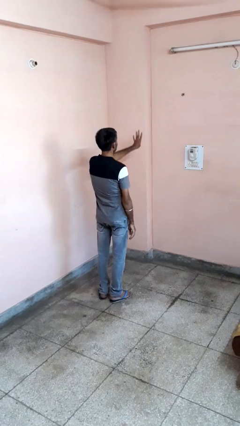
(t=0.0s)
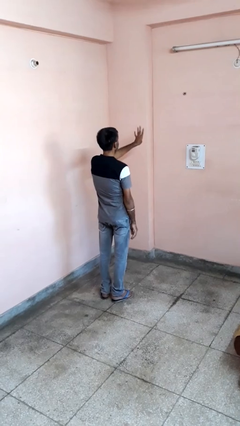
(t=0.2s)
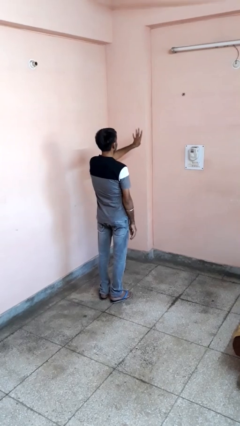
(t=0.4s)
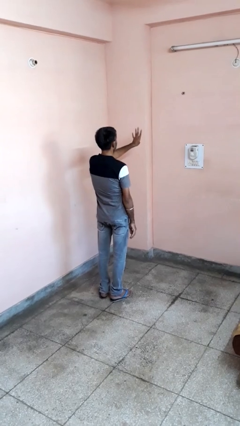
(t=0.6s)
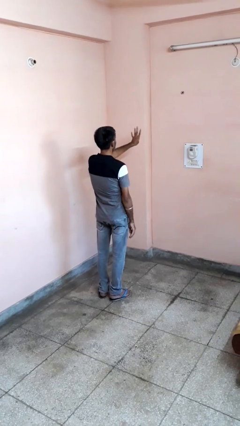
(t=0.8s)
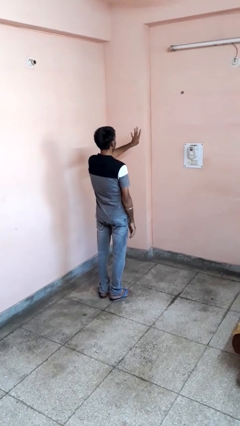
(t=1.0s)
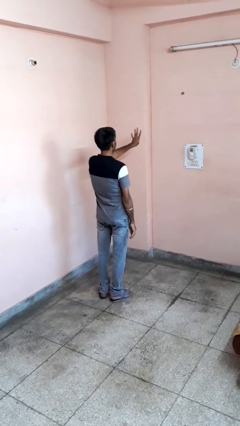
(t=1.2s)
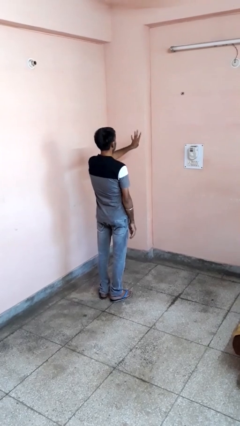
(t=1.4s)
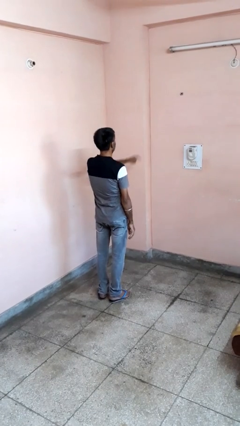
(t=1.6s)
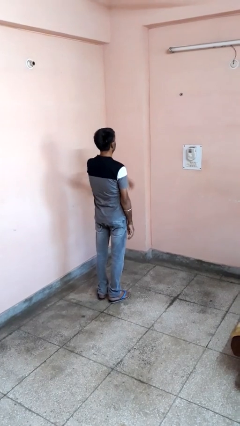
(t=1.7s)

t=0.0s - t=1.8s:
person gestures number four

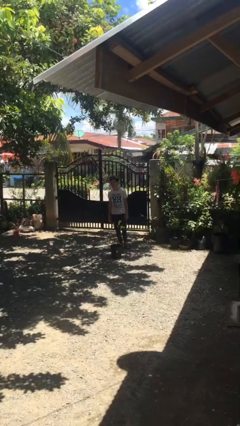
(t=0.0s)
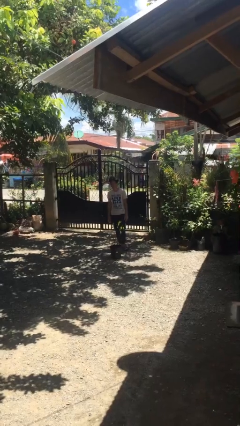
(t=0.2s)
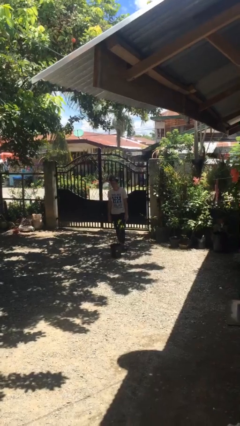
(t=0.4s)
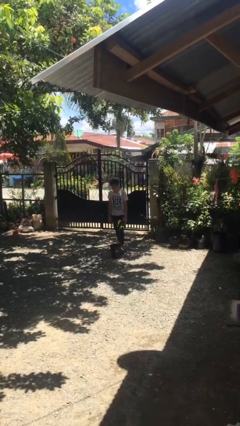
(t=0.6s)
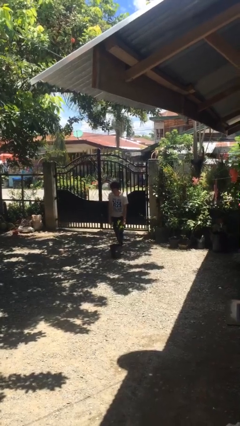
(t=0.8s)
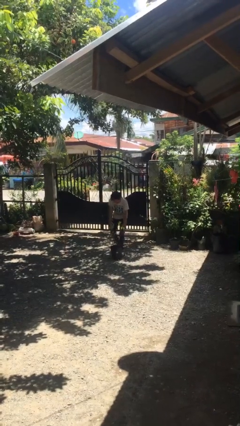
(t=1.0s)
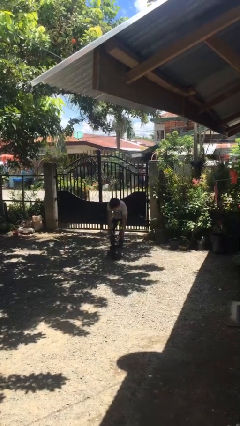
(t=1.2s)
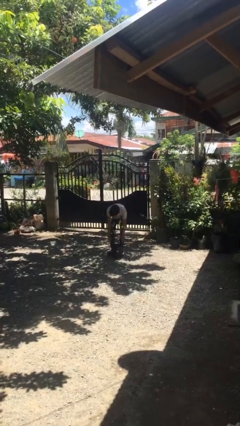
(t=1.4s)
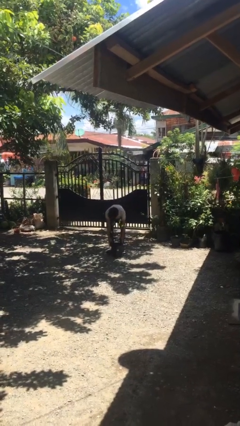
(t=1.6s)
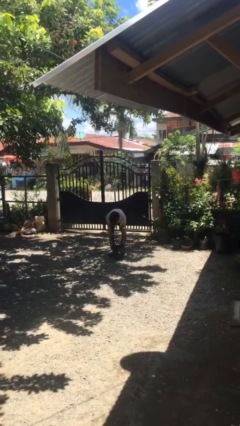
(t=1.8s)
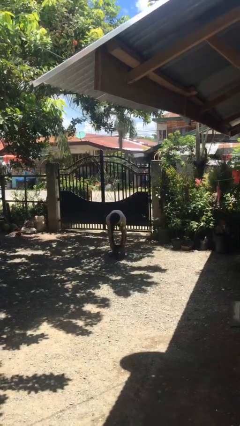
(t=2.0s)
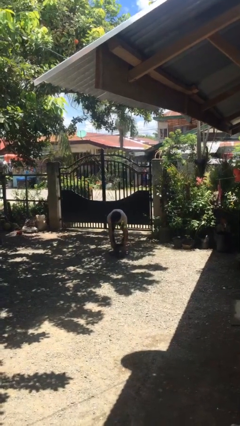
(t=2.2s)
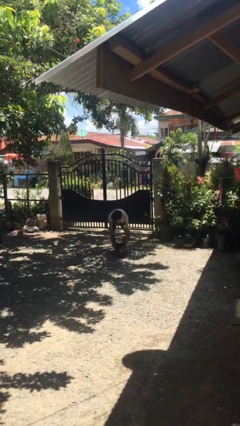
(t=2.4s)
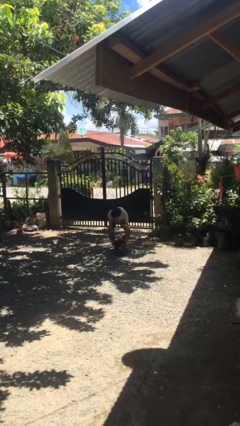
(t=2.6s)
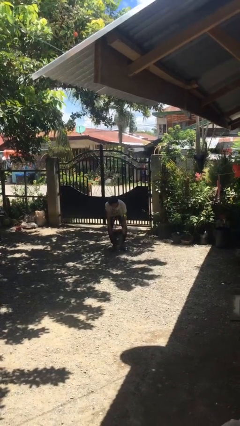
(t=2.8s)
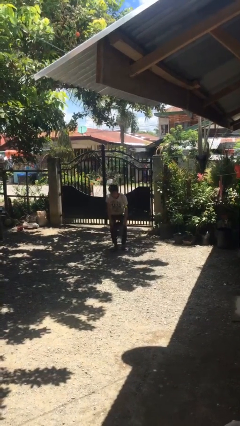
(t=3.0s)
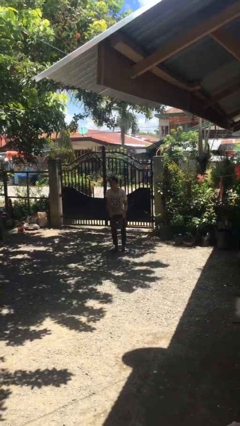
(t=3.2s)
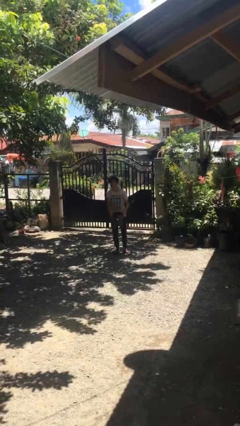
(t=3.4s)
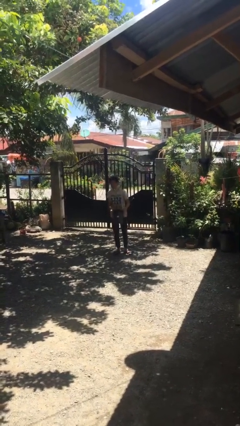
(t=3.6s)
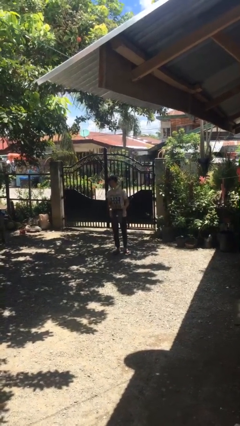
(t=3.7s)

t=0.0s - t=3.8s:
person picks up object from floor

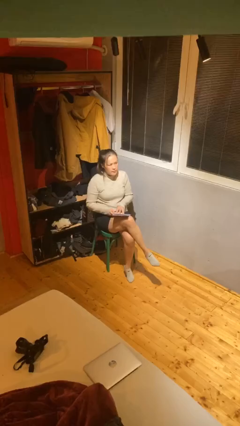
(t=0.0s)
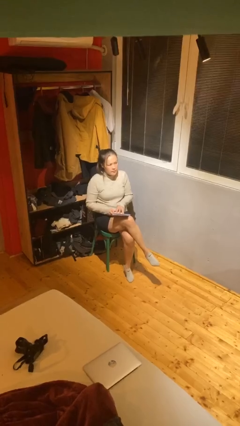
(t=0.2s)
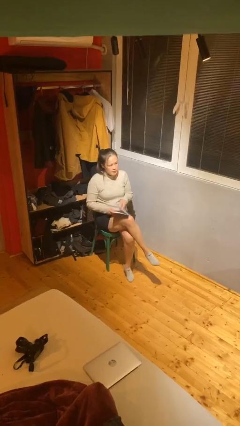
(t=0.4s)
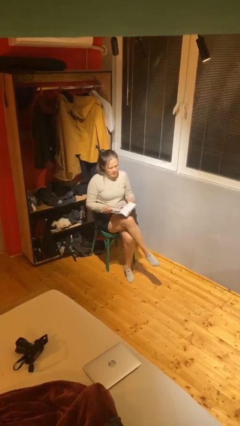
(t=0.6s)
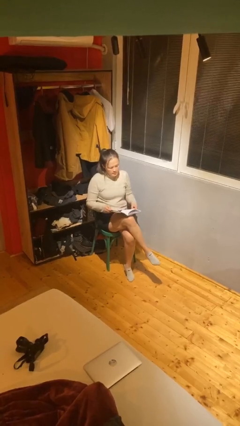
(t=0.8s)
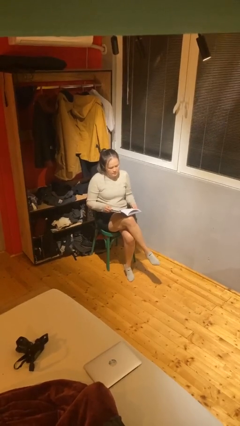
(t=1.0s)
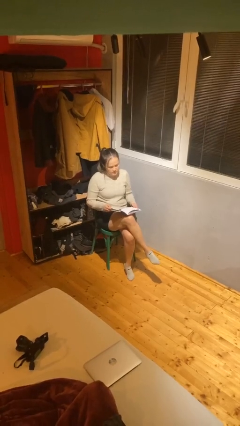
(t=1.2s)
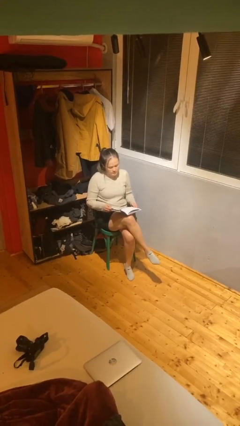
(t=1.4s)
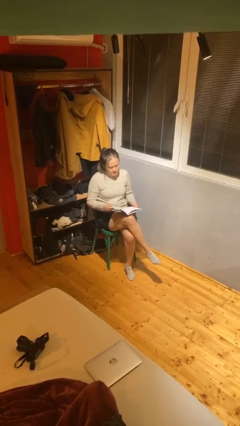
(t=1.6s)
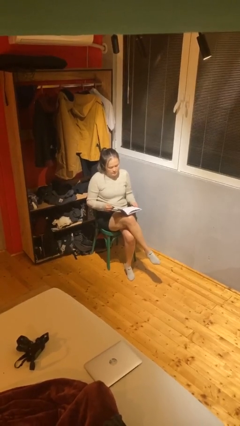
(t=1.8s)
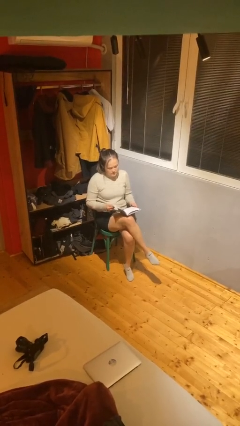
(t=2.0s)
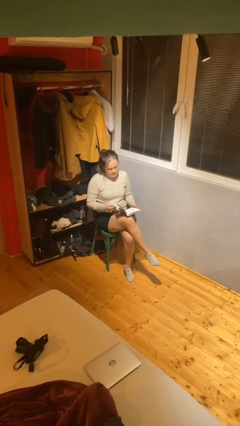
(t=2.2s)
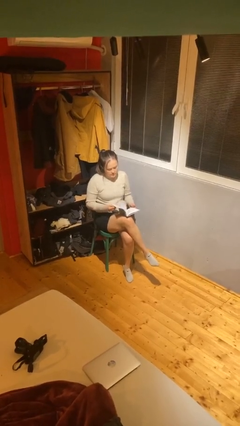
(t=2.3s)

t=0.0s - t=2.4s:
person reads document

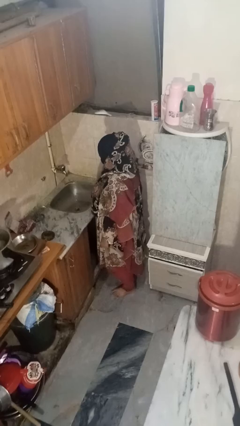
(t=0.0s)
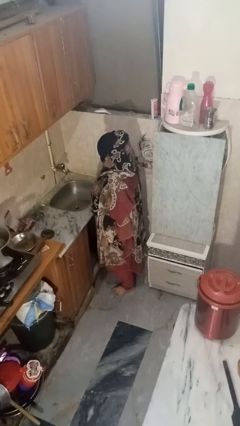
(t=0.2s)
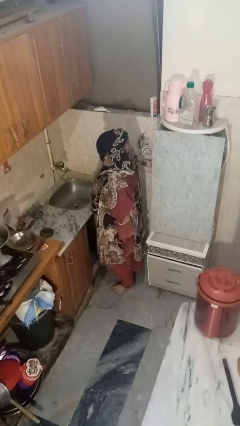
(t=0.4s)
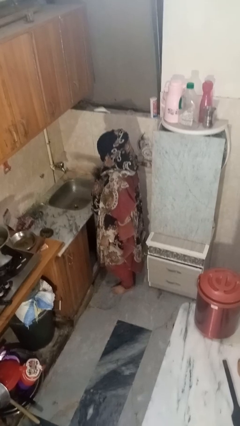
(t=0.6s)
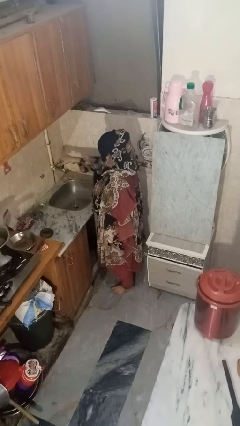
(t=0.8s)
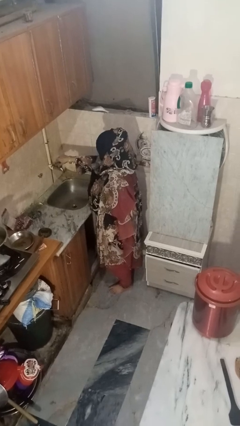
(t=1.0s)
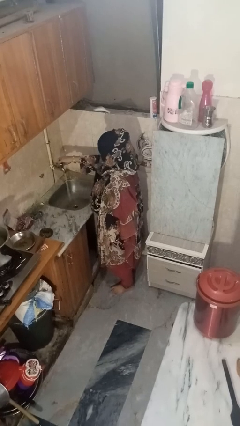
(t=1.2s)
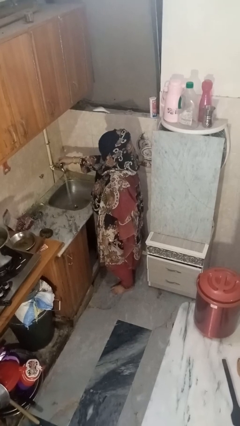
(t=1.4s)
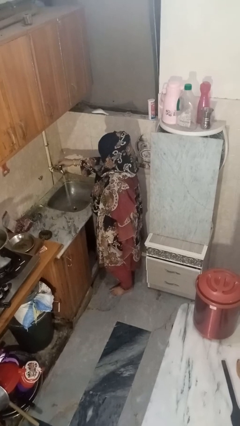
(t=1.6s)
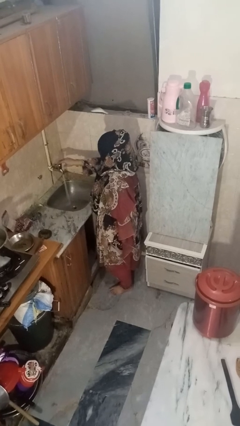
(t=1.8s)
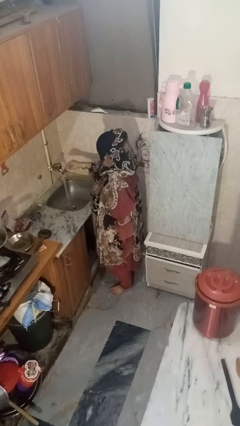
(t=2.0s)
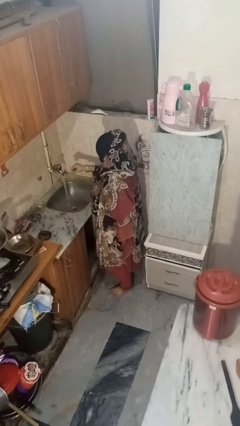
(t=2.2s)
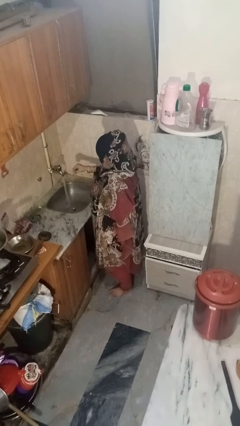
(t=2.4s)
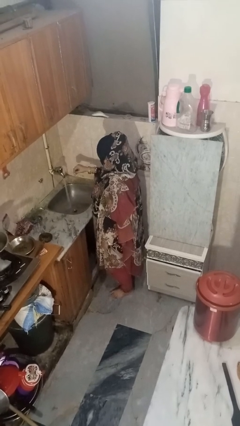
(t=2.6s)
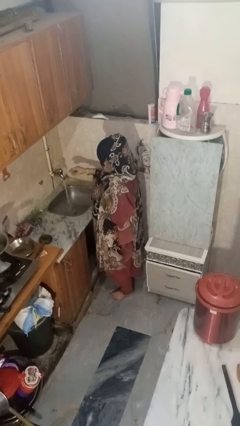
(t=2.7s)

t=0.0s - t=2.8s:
person turns on faucet

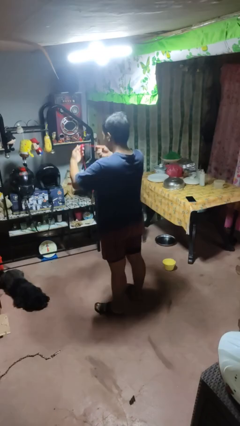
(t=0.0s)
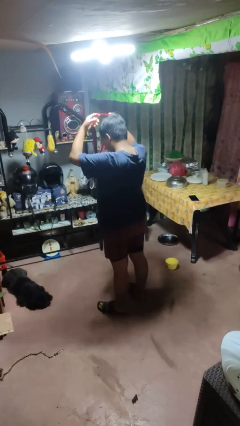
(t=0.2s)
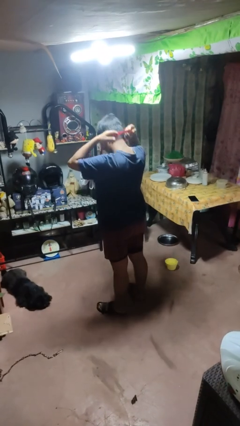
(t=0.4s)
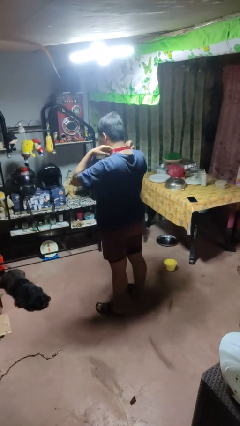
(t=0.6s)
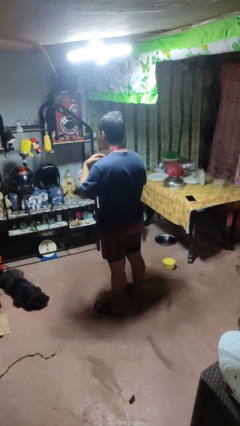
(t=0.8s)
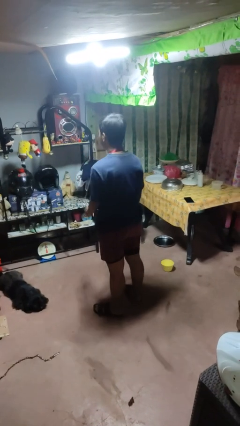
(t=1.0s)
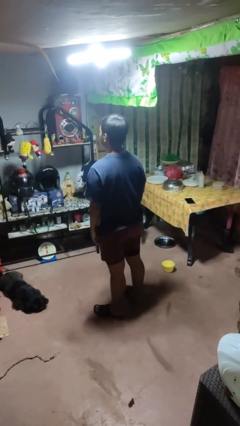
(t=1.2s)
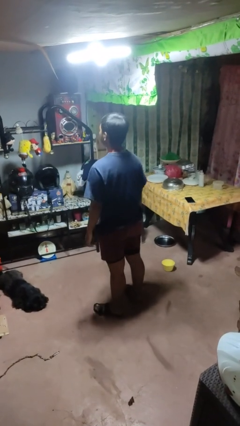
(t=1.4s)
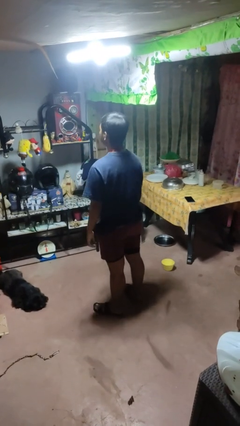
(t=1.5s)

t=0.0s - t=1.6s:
person puts on necklace

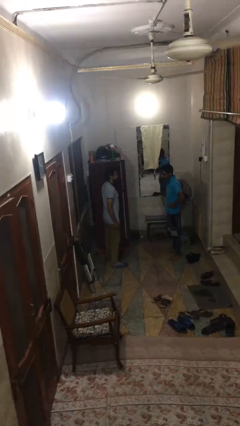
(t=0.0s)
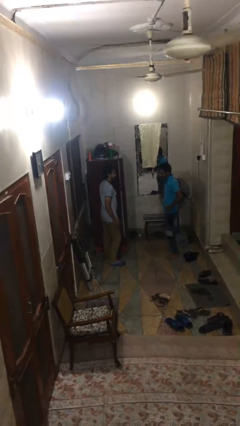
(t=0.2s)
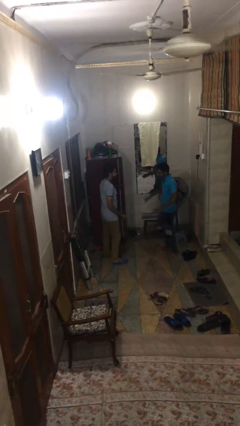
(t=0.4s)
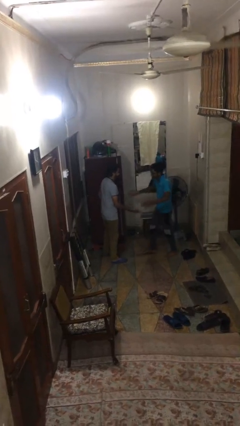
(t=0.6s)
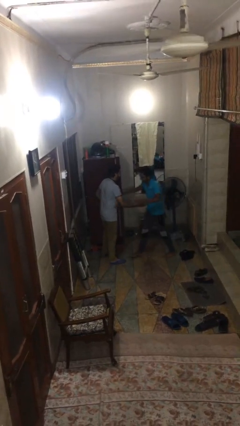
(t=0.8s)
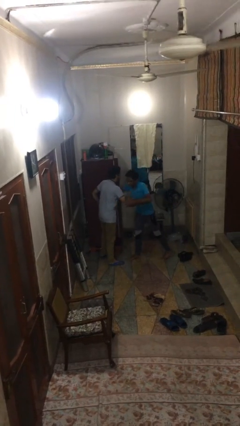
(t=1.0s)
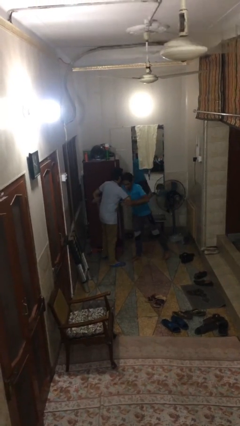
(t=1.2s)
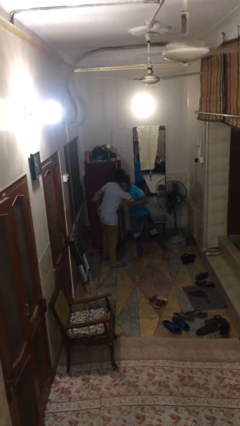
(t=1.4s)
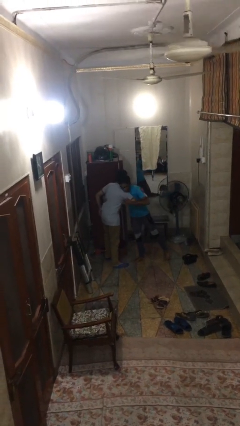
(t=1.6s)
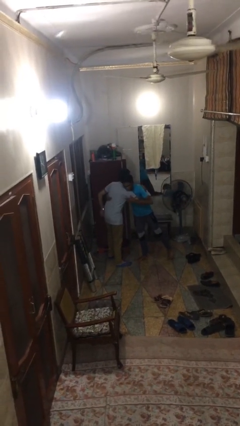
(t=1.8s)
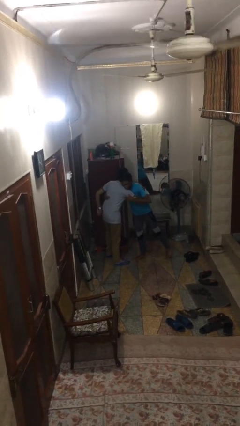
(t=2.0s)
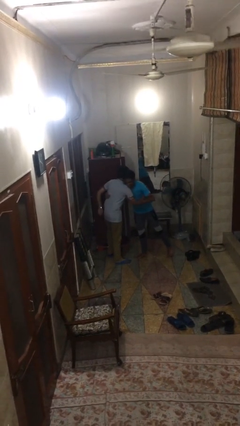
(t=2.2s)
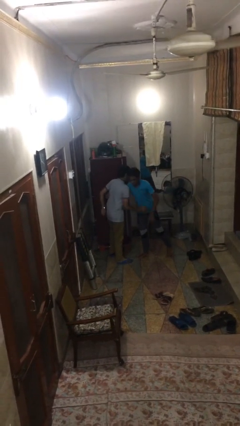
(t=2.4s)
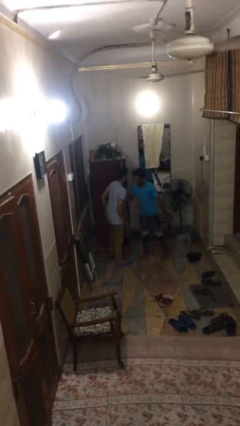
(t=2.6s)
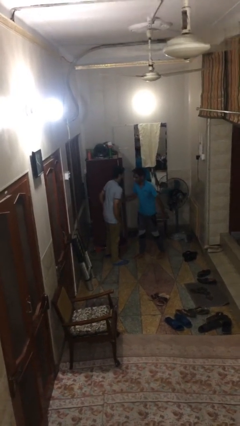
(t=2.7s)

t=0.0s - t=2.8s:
person embraces person

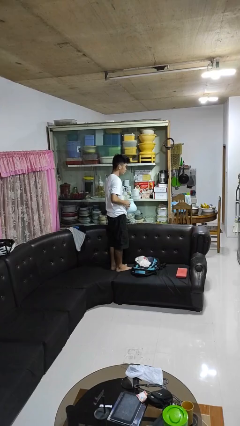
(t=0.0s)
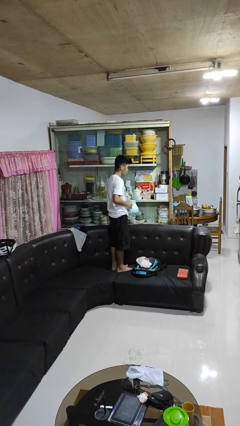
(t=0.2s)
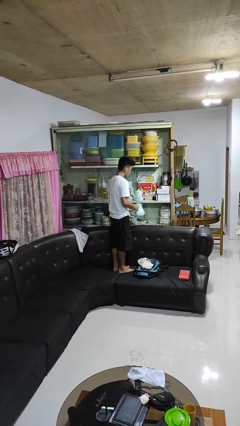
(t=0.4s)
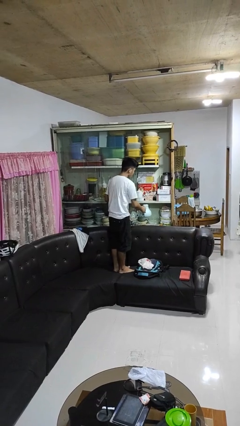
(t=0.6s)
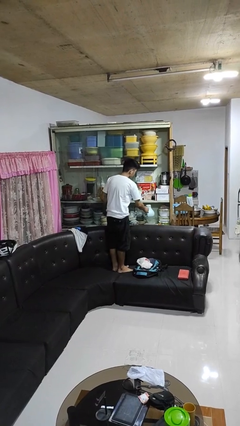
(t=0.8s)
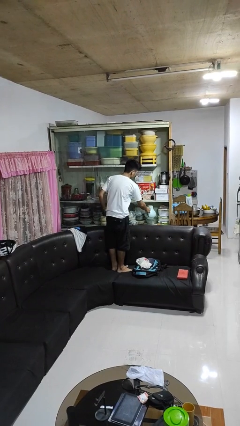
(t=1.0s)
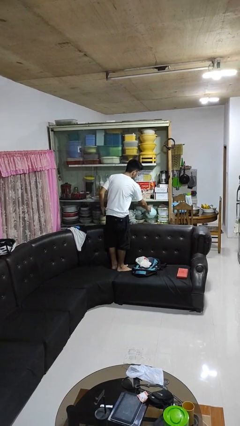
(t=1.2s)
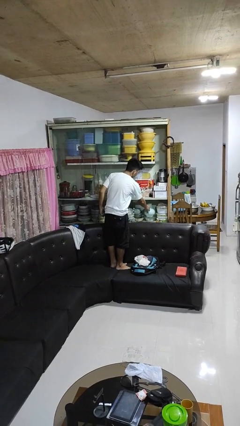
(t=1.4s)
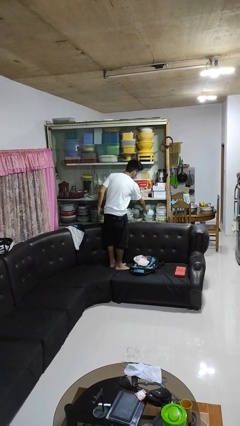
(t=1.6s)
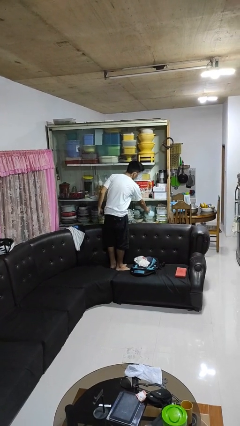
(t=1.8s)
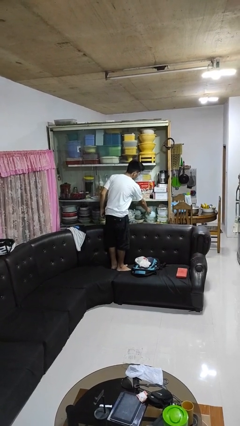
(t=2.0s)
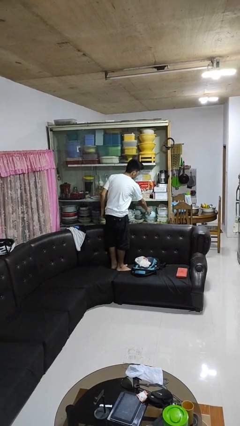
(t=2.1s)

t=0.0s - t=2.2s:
person puts down object into cabinet
